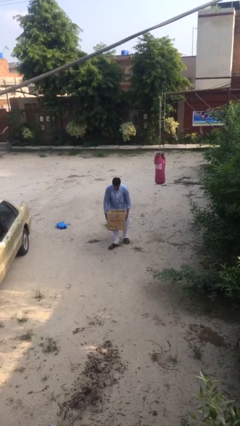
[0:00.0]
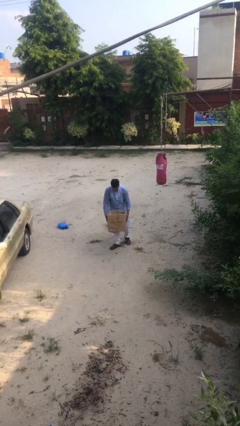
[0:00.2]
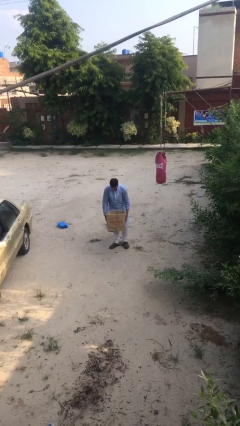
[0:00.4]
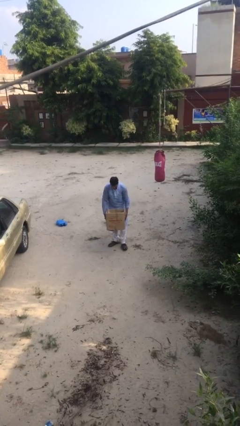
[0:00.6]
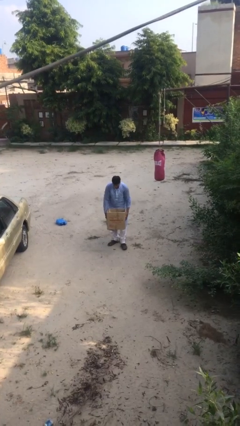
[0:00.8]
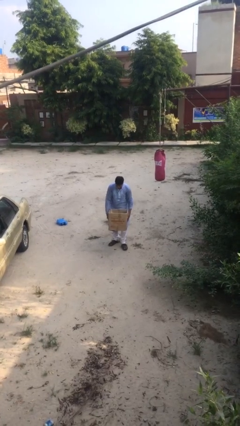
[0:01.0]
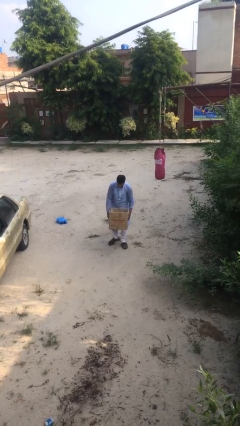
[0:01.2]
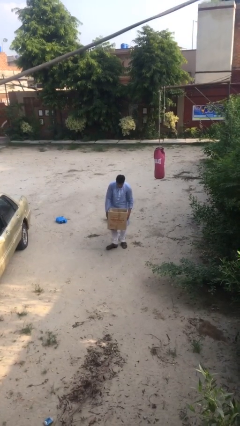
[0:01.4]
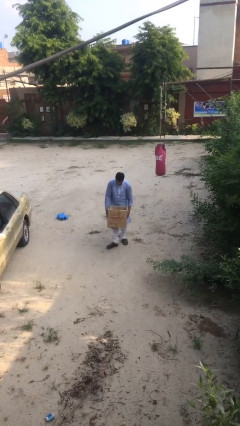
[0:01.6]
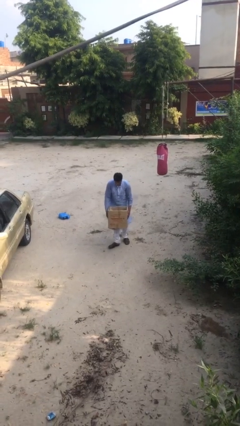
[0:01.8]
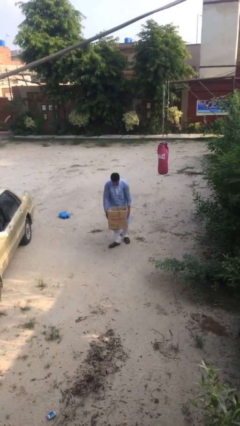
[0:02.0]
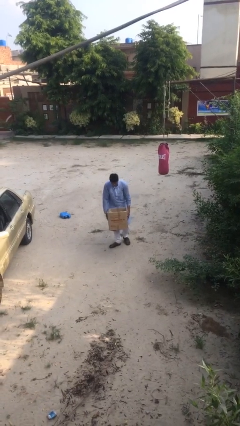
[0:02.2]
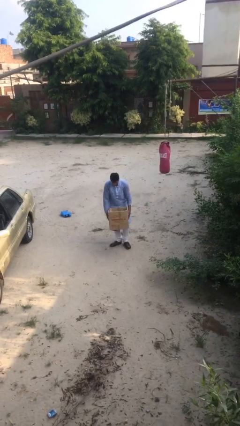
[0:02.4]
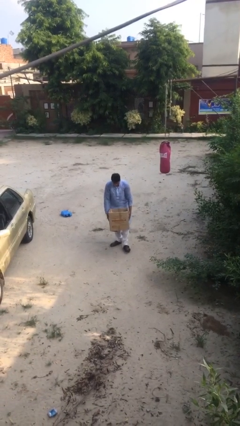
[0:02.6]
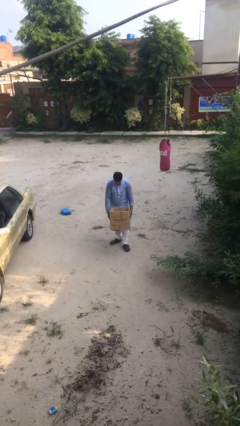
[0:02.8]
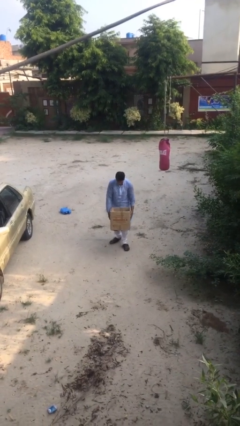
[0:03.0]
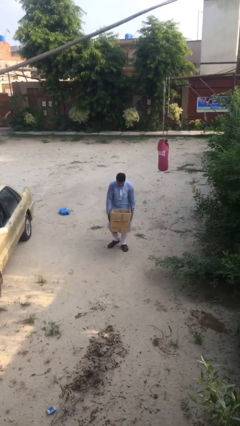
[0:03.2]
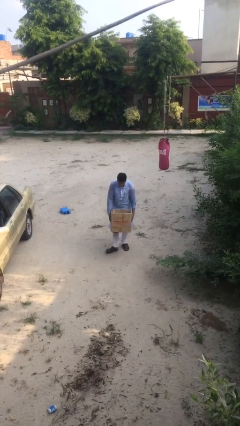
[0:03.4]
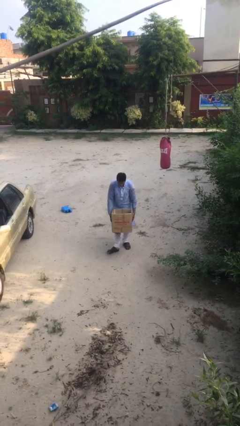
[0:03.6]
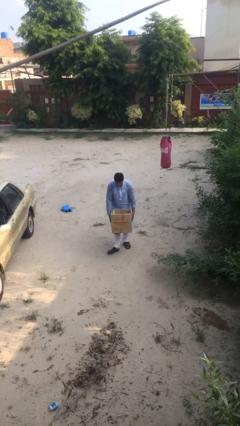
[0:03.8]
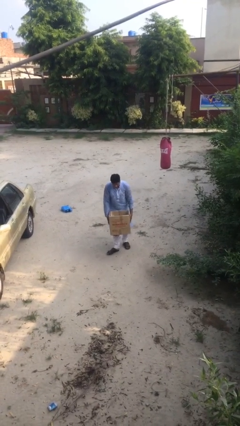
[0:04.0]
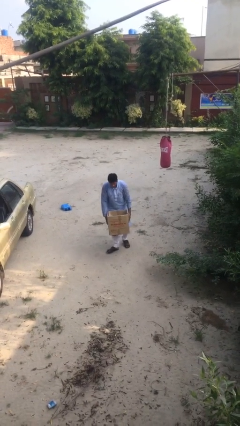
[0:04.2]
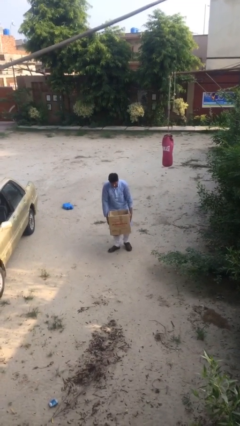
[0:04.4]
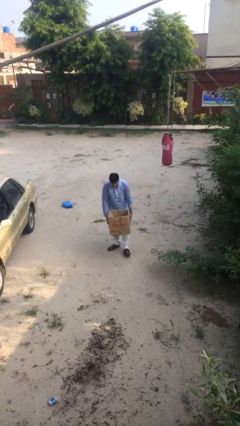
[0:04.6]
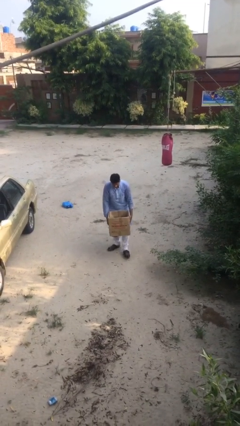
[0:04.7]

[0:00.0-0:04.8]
person carries heavy object

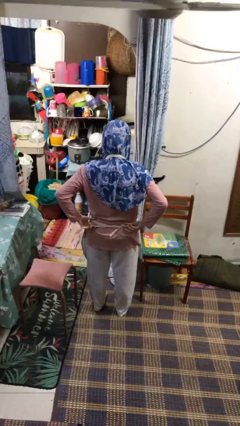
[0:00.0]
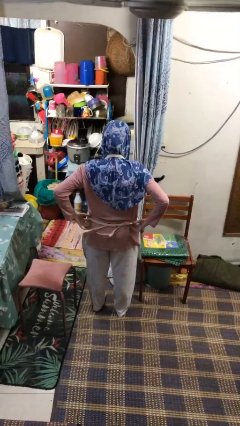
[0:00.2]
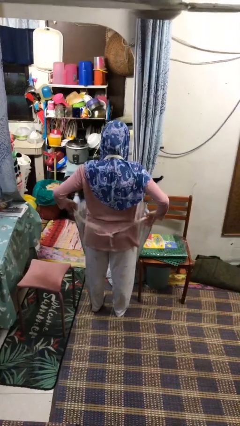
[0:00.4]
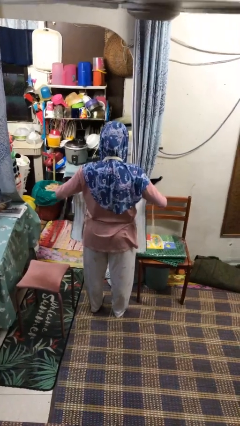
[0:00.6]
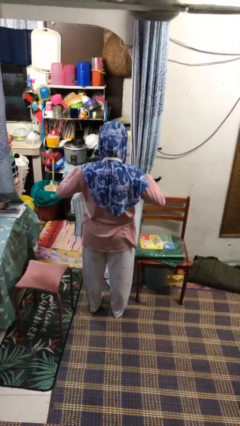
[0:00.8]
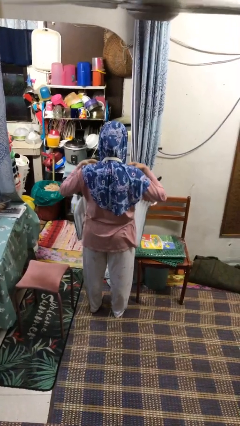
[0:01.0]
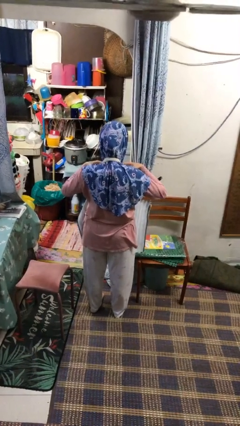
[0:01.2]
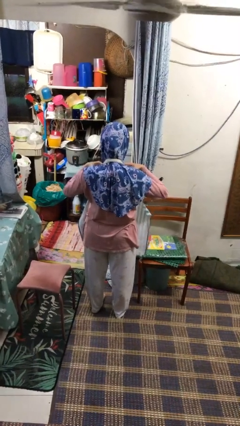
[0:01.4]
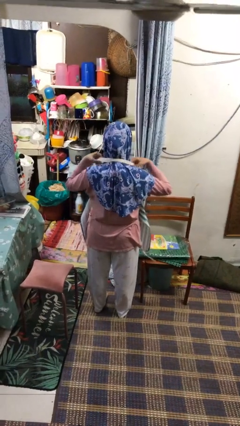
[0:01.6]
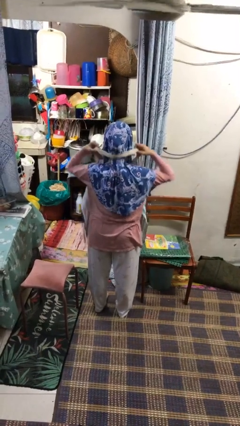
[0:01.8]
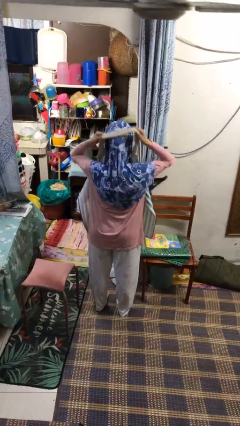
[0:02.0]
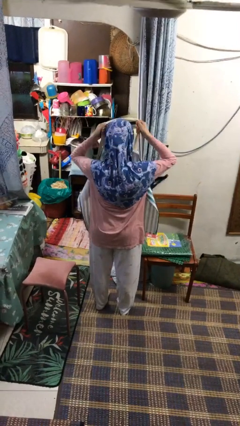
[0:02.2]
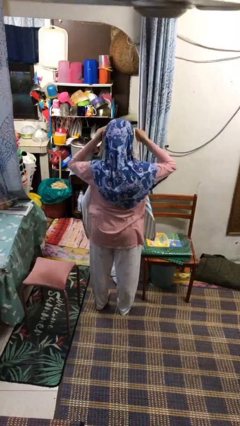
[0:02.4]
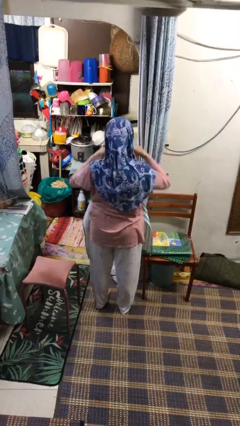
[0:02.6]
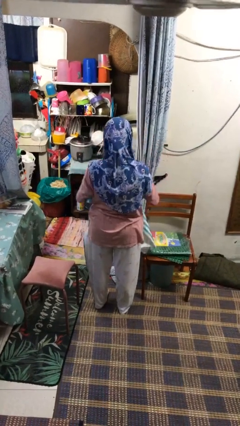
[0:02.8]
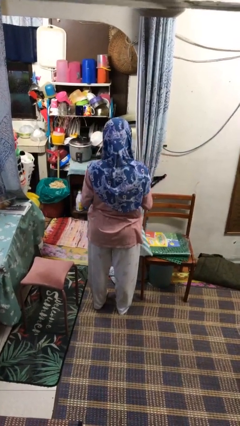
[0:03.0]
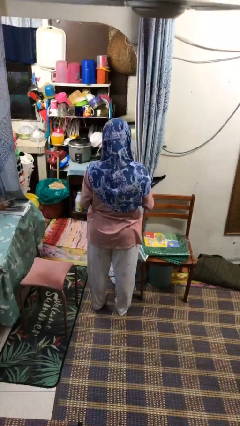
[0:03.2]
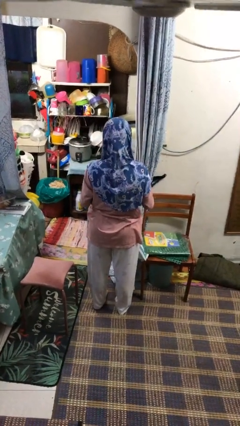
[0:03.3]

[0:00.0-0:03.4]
person takes off apron

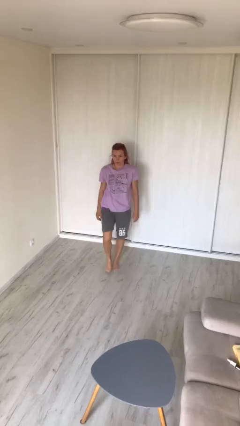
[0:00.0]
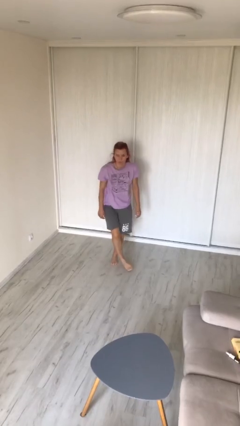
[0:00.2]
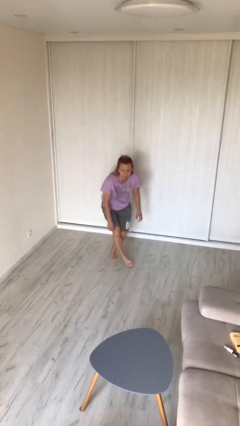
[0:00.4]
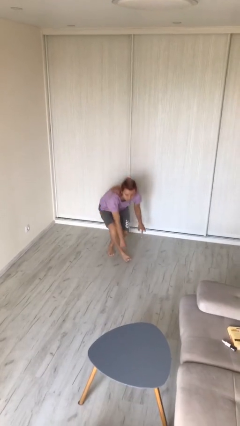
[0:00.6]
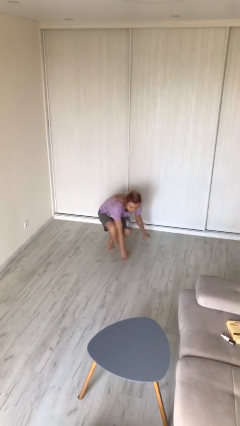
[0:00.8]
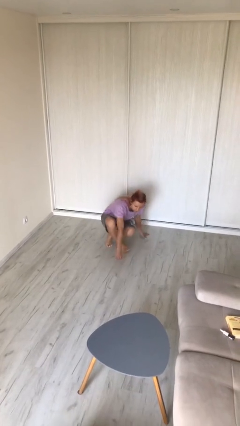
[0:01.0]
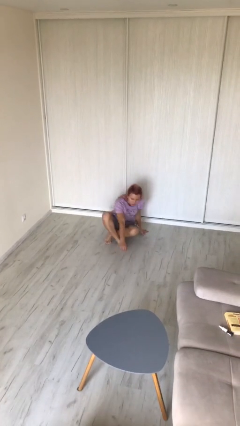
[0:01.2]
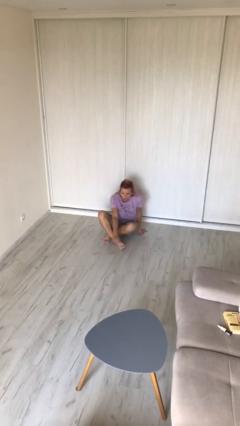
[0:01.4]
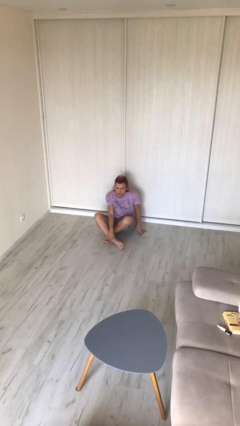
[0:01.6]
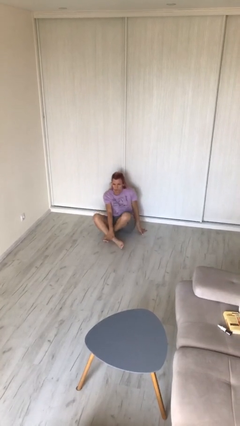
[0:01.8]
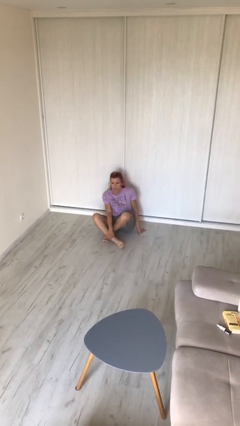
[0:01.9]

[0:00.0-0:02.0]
person sits crisscross

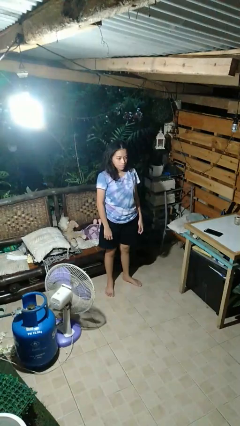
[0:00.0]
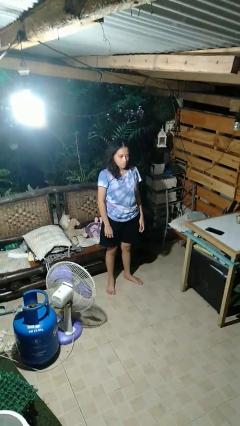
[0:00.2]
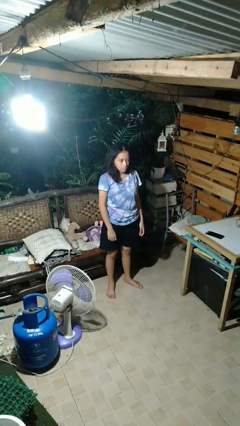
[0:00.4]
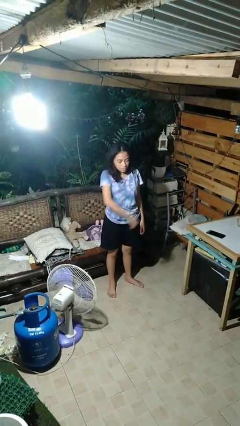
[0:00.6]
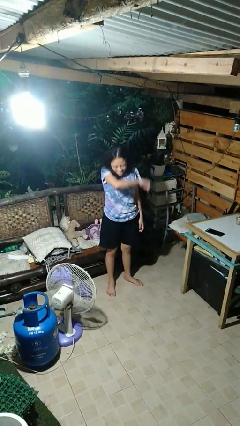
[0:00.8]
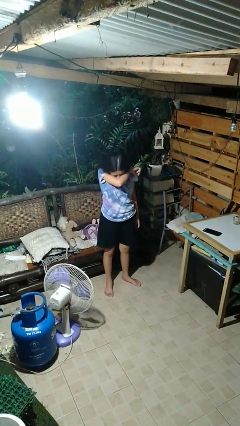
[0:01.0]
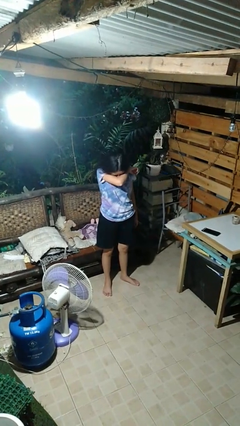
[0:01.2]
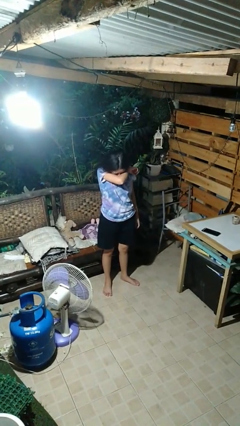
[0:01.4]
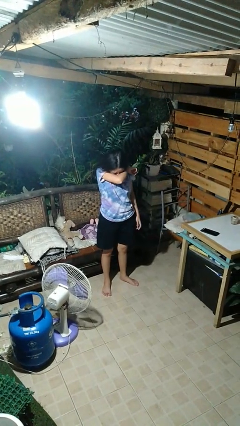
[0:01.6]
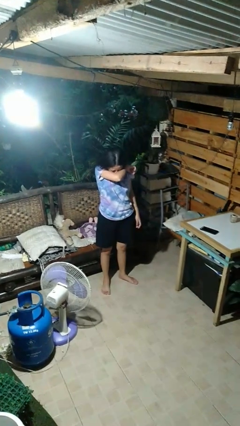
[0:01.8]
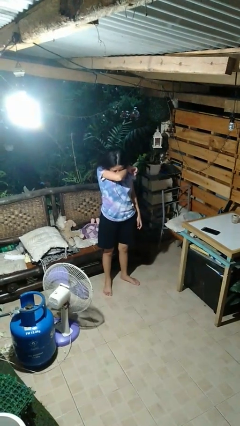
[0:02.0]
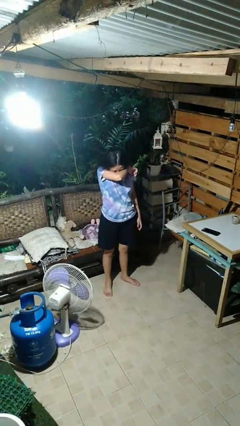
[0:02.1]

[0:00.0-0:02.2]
person sneezes into arm

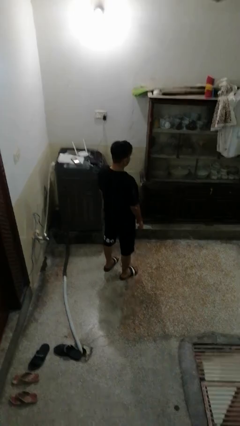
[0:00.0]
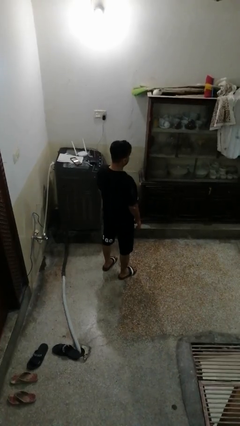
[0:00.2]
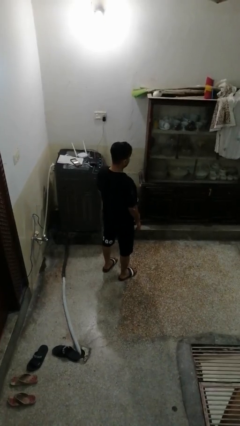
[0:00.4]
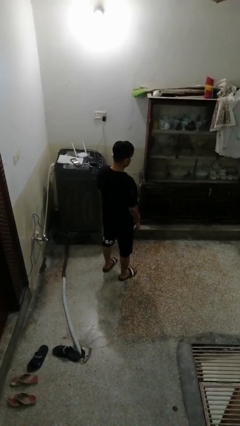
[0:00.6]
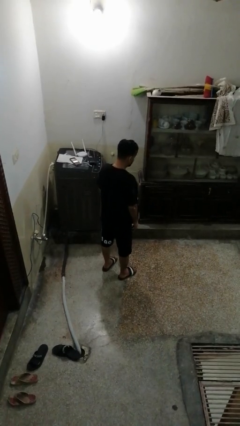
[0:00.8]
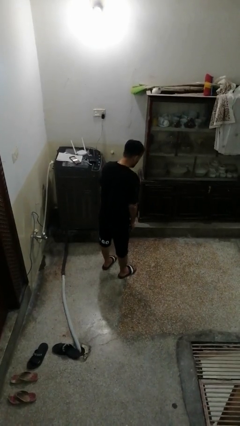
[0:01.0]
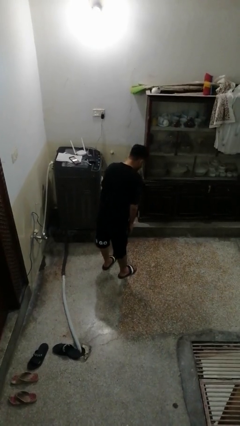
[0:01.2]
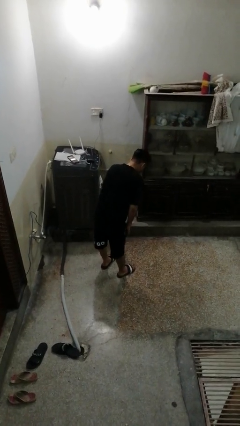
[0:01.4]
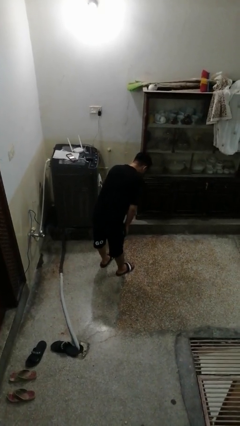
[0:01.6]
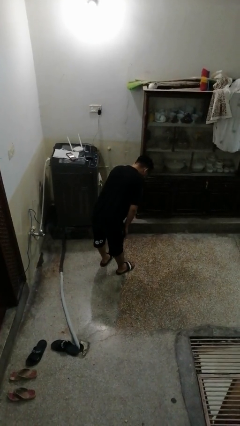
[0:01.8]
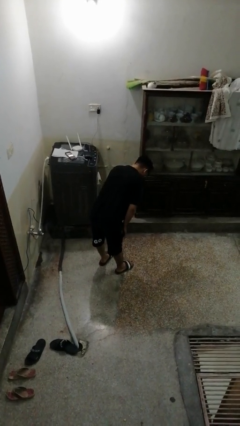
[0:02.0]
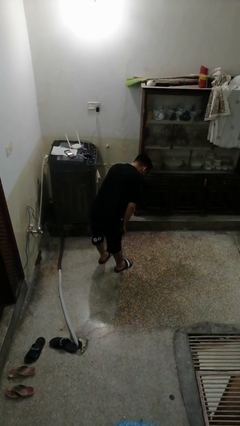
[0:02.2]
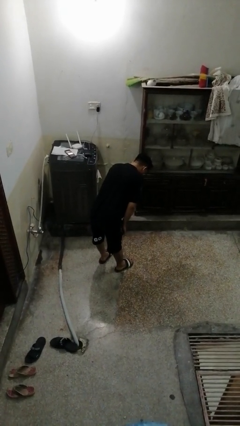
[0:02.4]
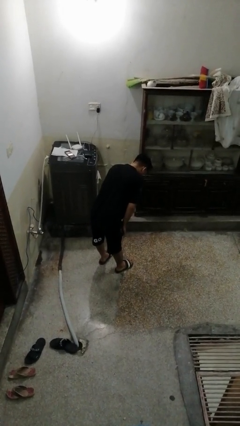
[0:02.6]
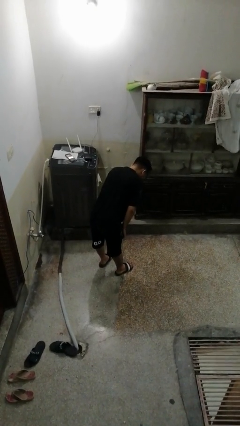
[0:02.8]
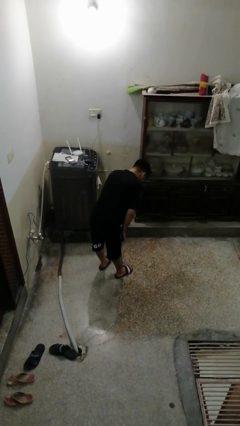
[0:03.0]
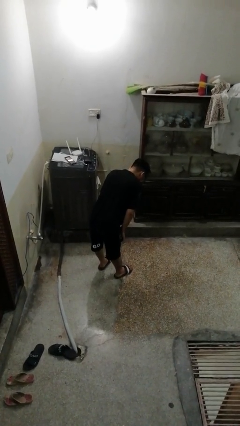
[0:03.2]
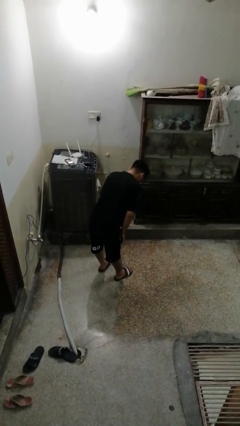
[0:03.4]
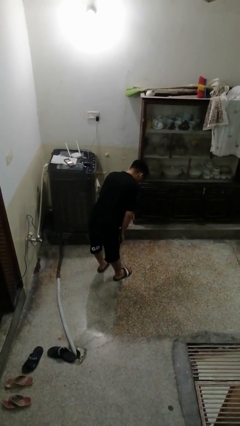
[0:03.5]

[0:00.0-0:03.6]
person bows

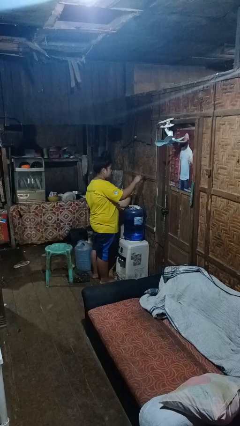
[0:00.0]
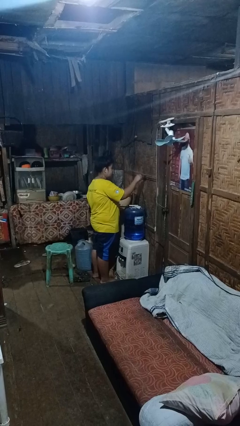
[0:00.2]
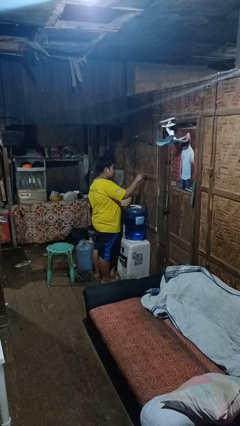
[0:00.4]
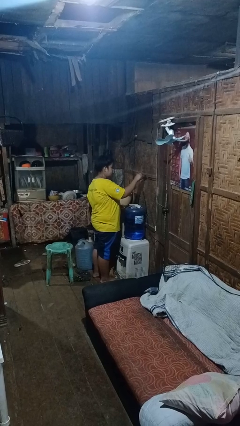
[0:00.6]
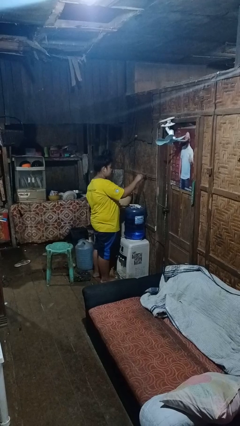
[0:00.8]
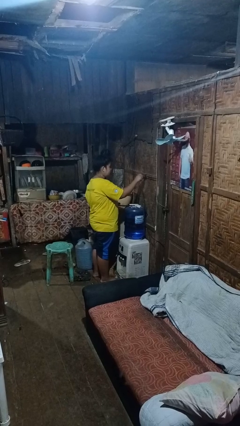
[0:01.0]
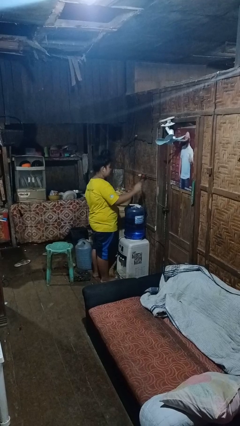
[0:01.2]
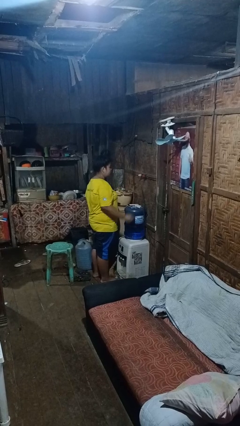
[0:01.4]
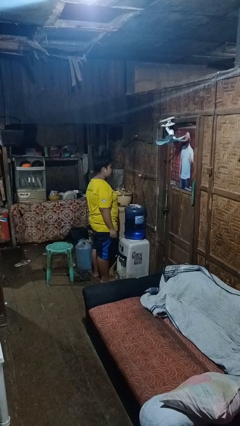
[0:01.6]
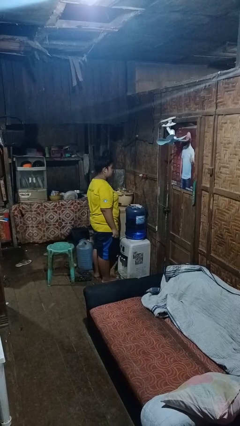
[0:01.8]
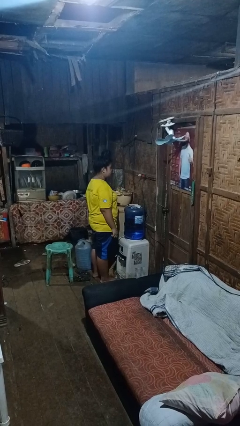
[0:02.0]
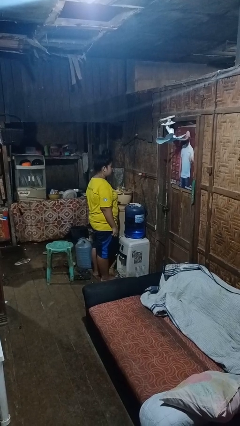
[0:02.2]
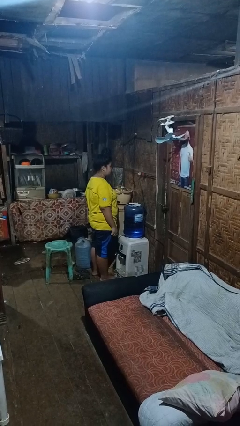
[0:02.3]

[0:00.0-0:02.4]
person plugs into electrical socket
